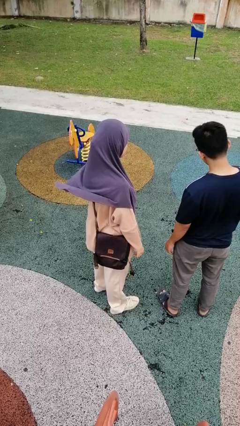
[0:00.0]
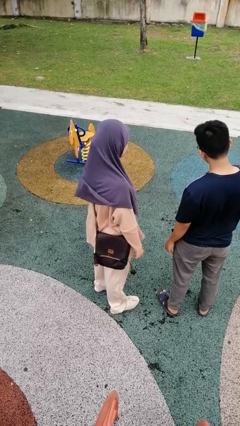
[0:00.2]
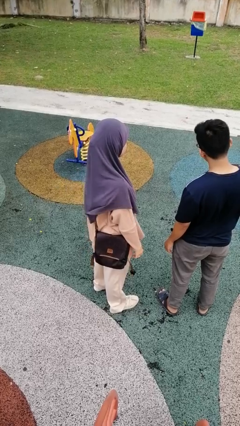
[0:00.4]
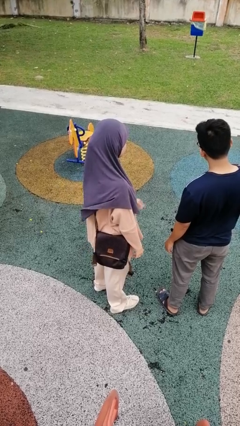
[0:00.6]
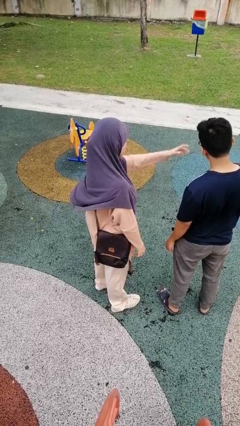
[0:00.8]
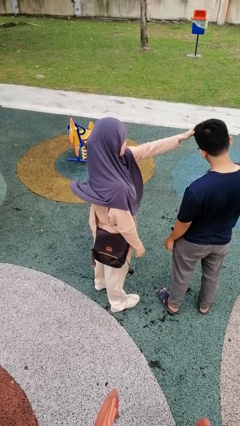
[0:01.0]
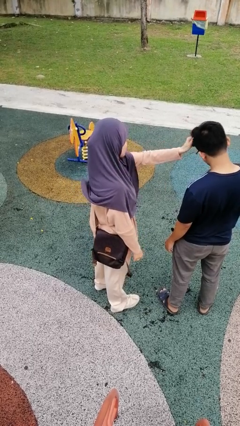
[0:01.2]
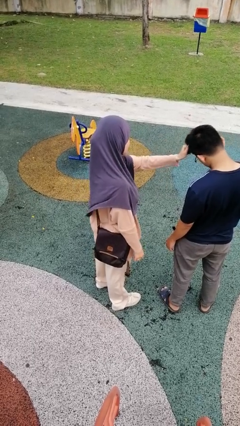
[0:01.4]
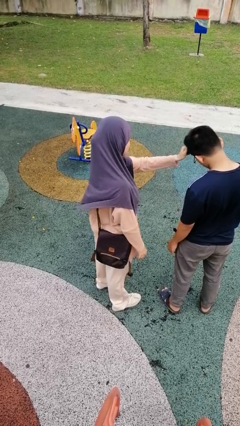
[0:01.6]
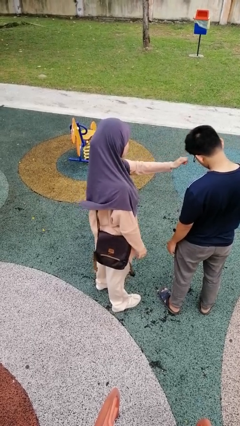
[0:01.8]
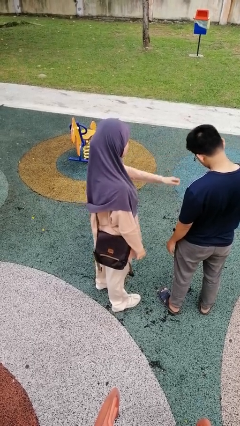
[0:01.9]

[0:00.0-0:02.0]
person grabs person by hair

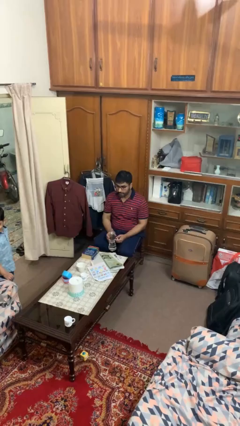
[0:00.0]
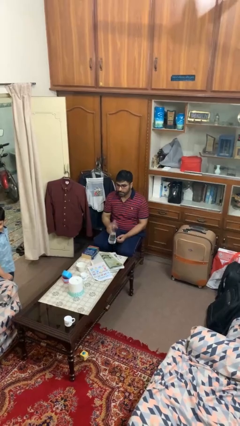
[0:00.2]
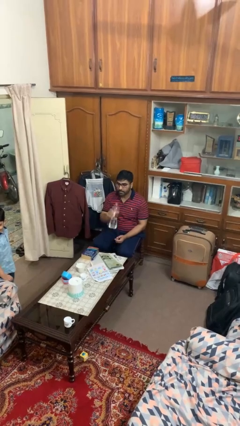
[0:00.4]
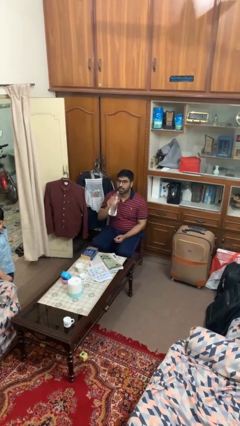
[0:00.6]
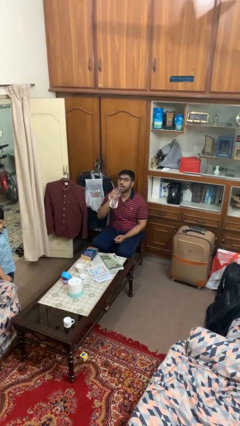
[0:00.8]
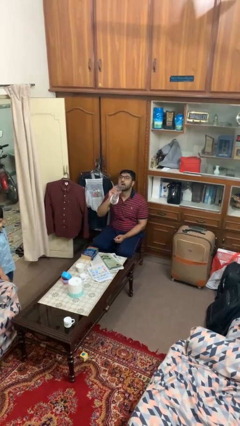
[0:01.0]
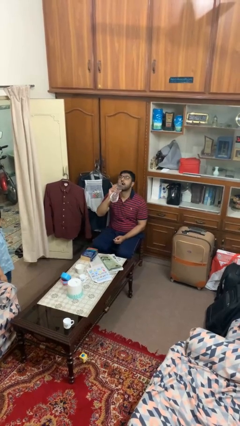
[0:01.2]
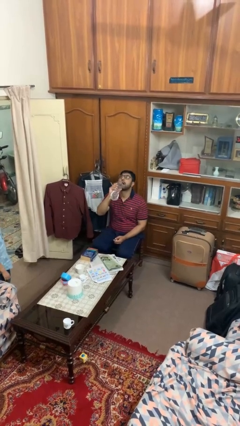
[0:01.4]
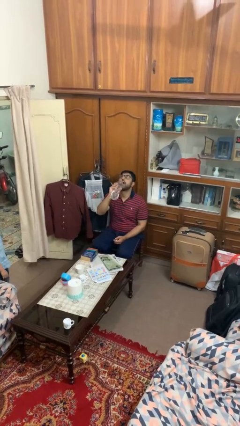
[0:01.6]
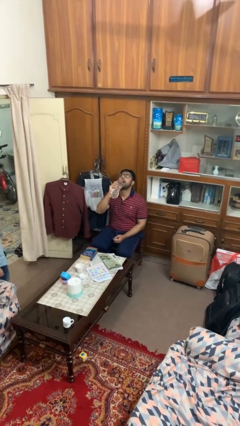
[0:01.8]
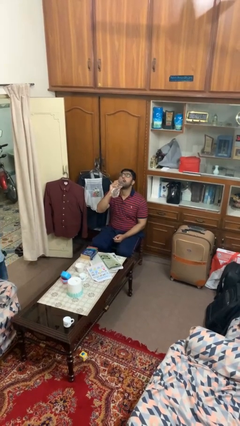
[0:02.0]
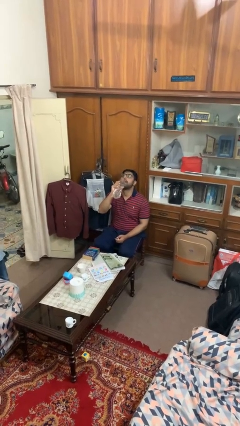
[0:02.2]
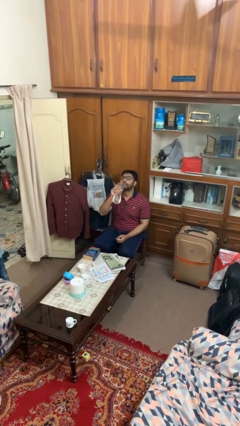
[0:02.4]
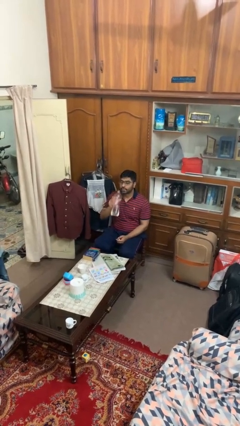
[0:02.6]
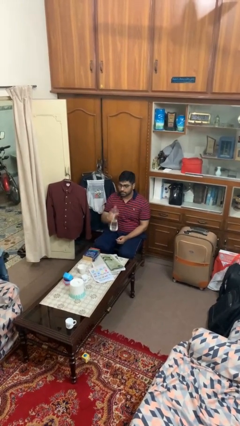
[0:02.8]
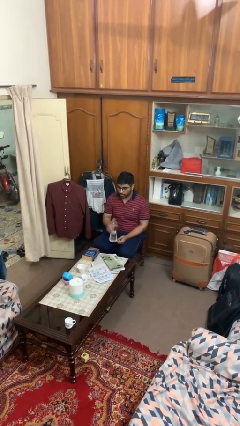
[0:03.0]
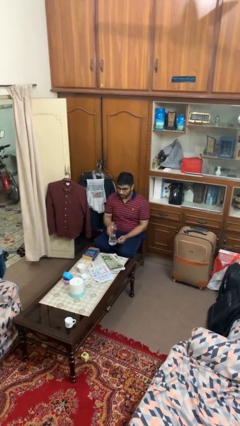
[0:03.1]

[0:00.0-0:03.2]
person drinks from bottle

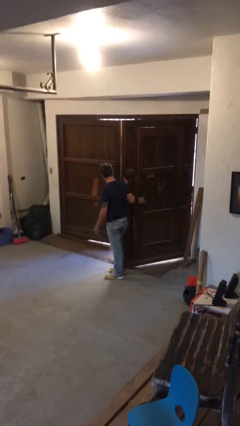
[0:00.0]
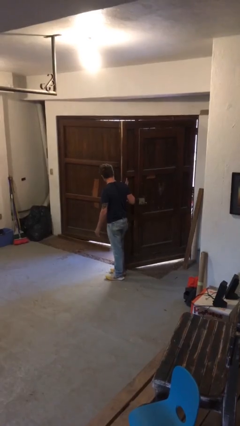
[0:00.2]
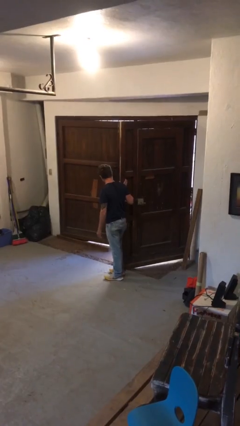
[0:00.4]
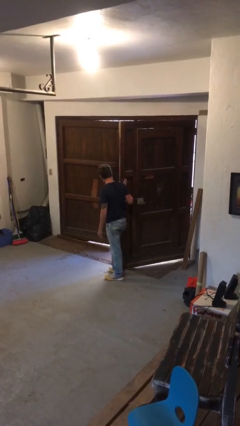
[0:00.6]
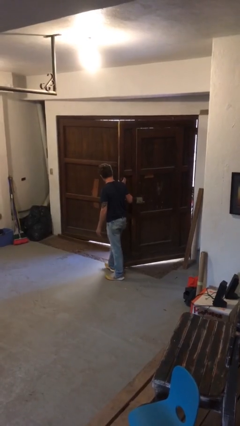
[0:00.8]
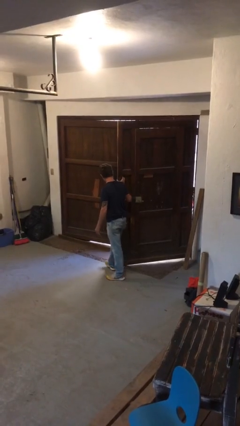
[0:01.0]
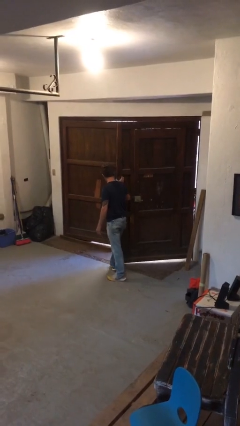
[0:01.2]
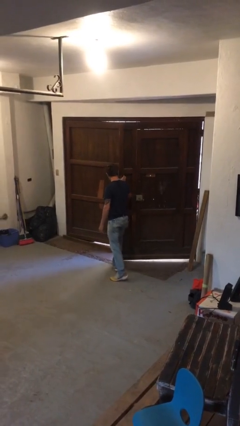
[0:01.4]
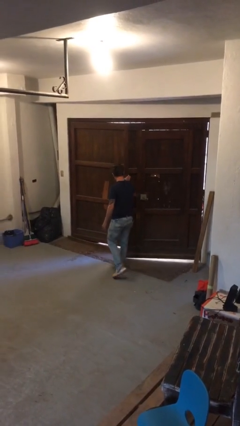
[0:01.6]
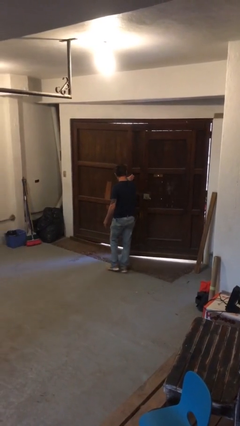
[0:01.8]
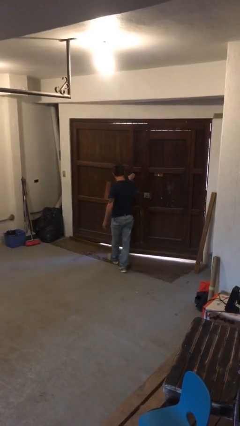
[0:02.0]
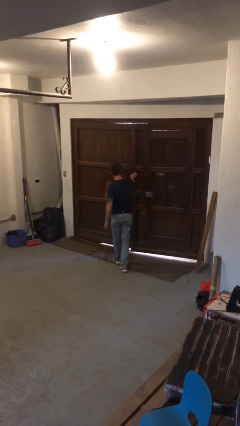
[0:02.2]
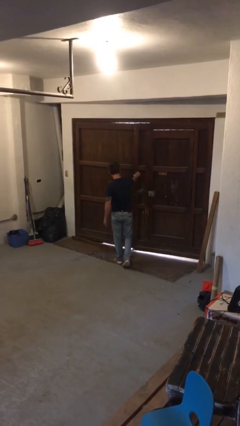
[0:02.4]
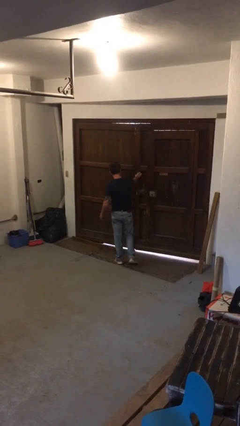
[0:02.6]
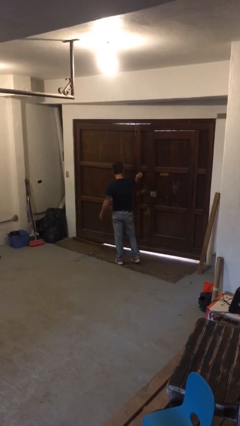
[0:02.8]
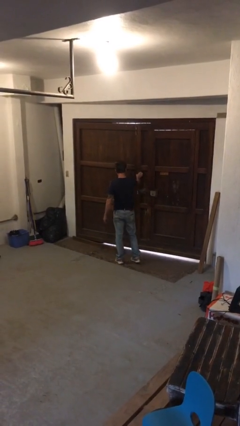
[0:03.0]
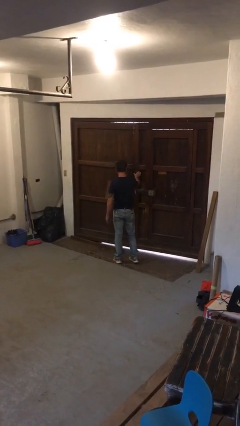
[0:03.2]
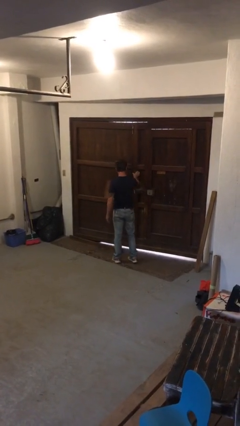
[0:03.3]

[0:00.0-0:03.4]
person closes gate

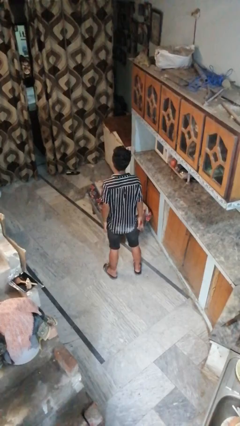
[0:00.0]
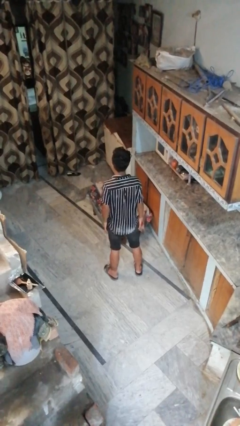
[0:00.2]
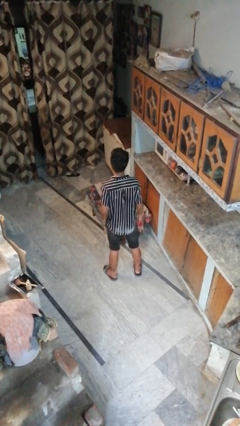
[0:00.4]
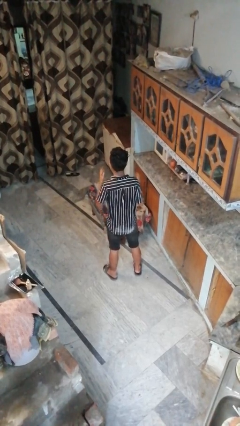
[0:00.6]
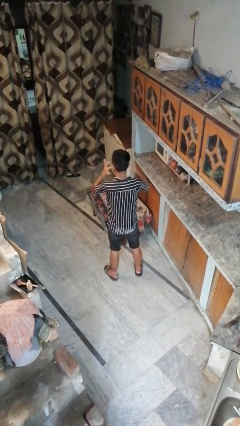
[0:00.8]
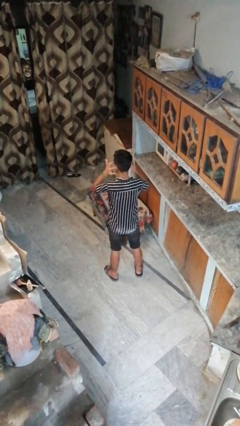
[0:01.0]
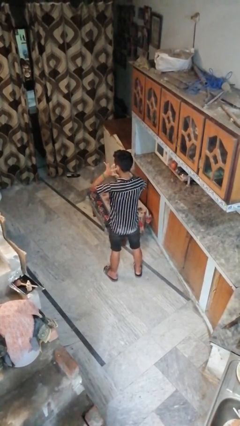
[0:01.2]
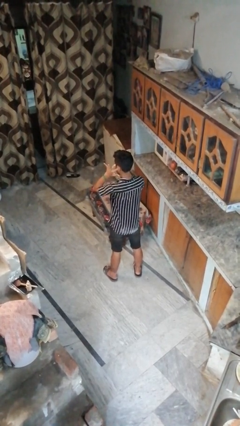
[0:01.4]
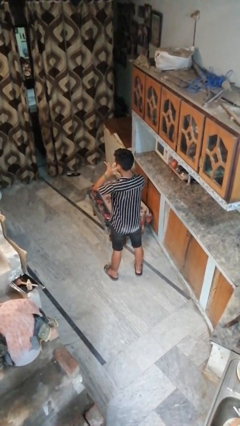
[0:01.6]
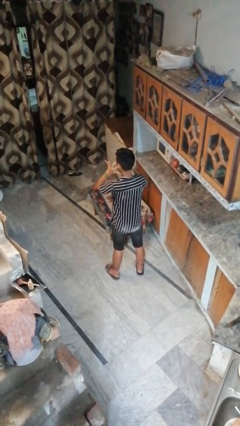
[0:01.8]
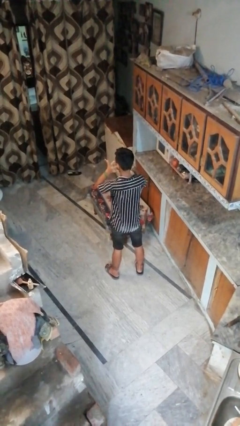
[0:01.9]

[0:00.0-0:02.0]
person puts fingers in ear

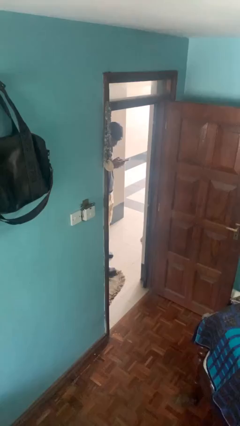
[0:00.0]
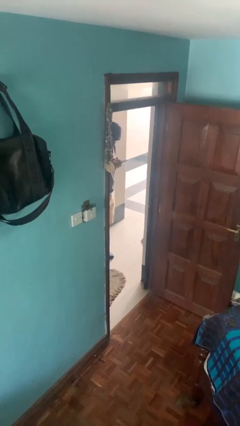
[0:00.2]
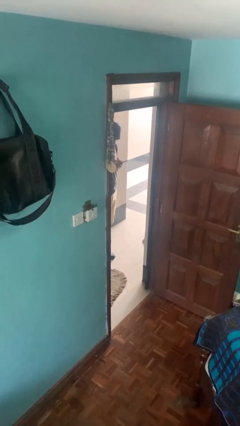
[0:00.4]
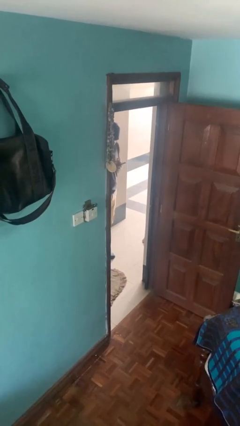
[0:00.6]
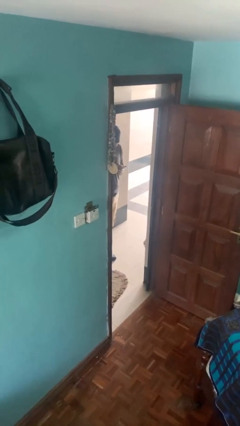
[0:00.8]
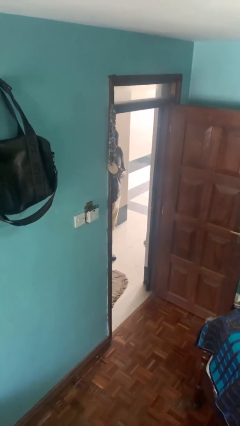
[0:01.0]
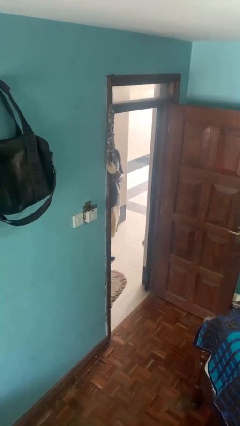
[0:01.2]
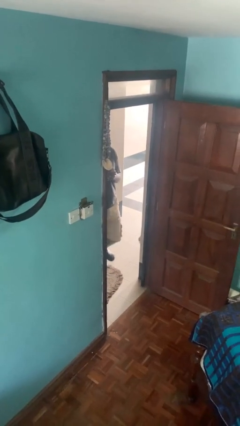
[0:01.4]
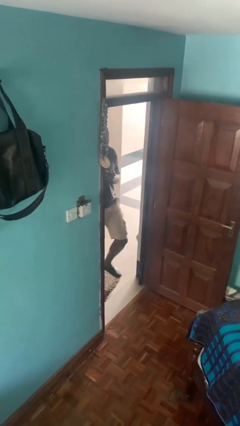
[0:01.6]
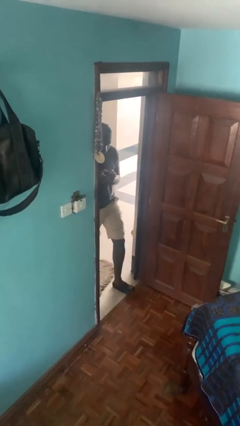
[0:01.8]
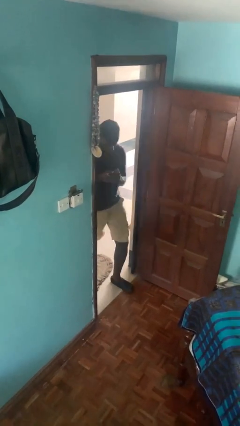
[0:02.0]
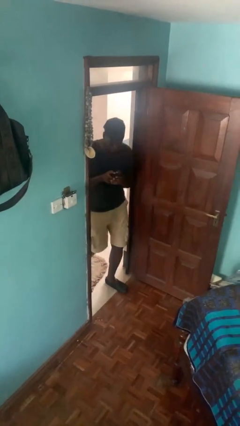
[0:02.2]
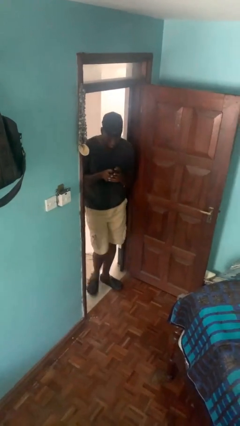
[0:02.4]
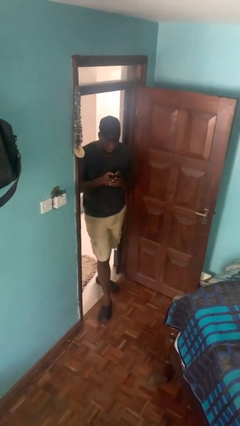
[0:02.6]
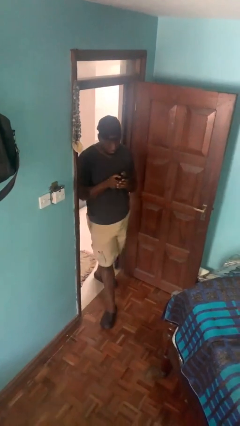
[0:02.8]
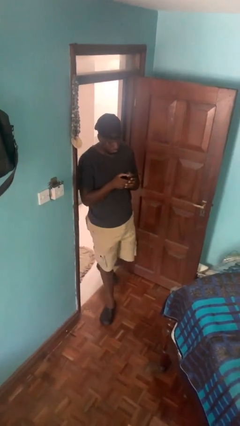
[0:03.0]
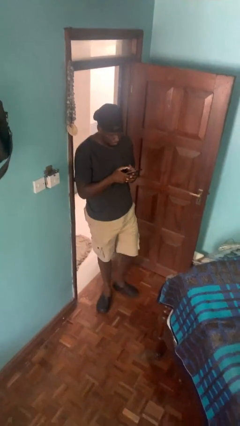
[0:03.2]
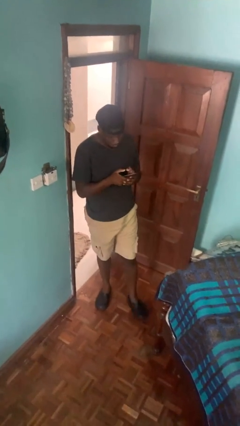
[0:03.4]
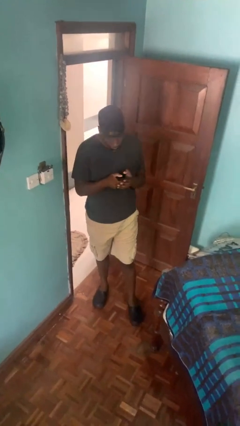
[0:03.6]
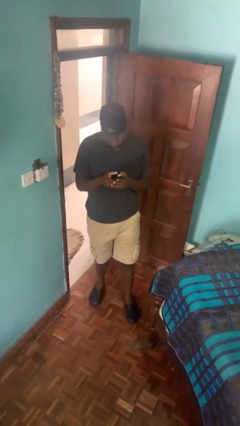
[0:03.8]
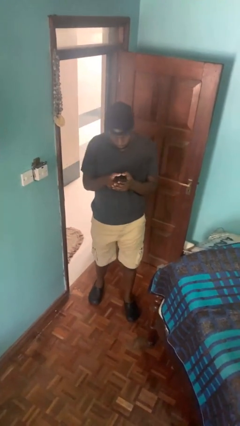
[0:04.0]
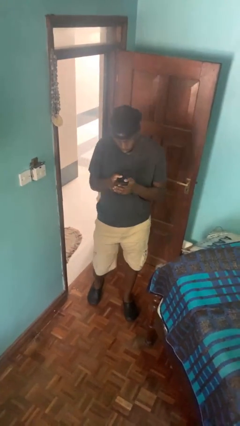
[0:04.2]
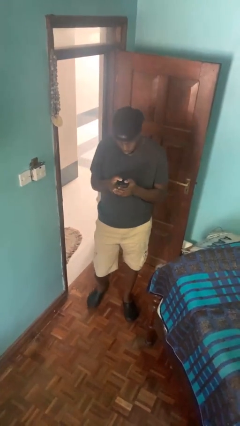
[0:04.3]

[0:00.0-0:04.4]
person enters scene through structure

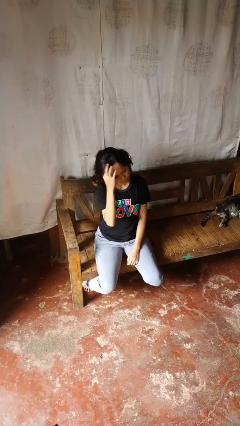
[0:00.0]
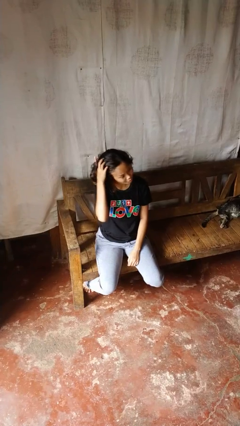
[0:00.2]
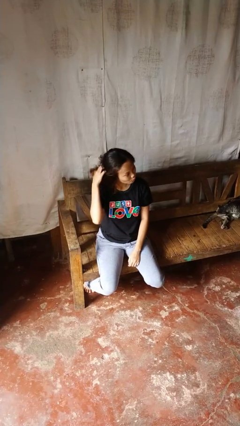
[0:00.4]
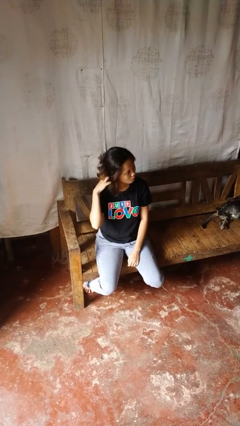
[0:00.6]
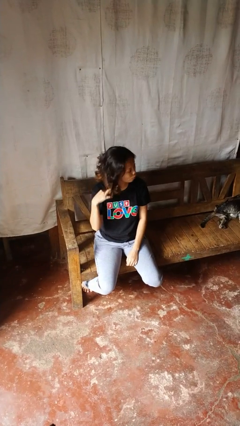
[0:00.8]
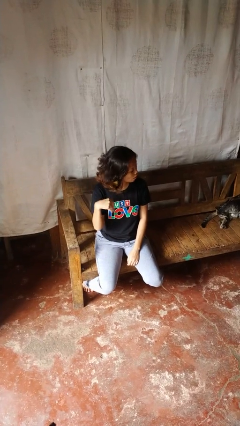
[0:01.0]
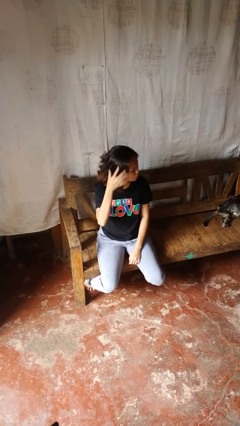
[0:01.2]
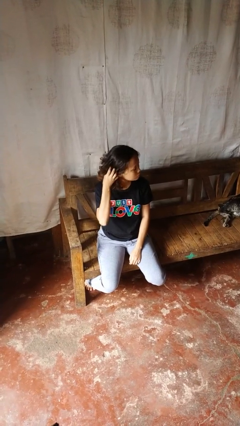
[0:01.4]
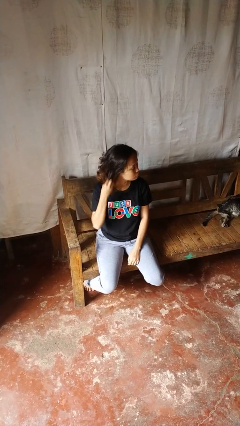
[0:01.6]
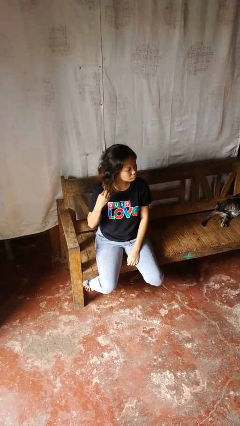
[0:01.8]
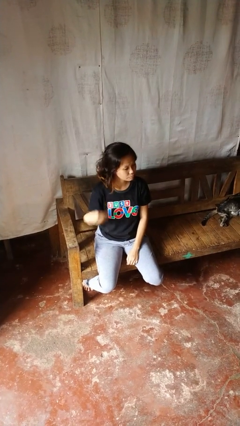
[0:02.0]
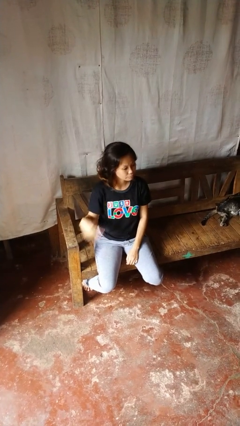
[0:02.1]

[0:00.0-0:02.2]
person strokes hair

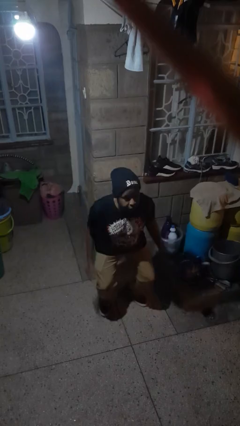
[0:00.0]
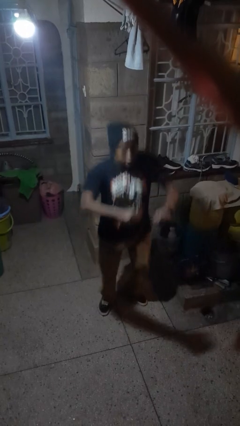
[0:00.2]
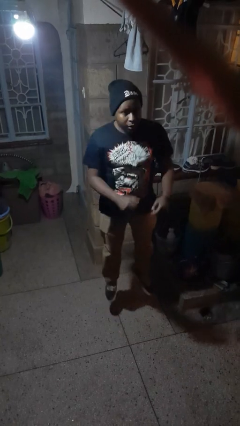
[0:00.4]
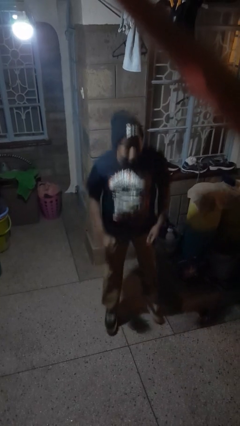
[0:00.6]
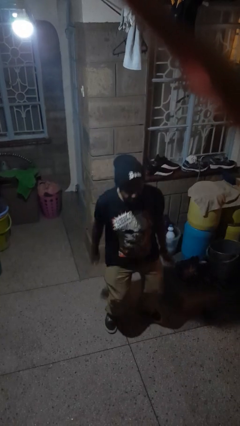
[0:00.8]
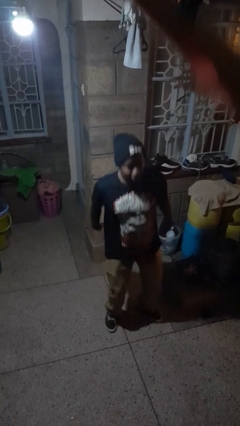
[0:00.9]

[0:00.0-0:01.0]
person jumps
